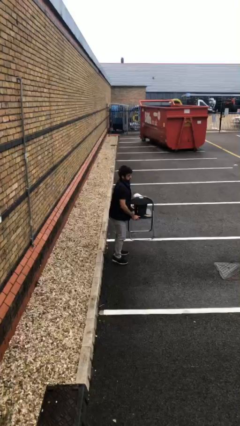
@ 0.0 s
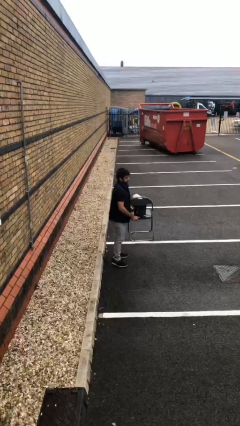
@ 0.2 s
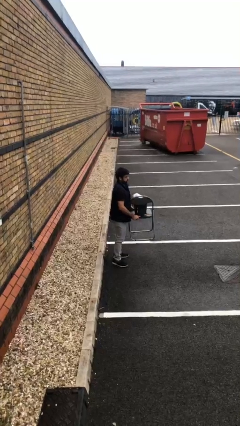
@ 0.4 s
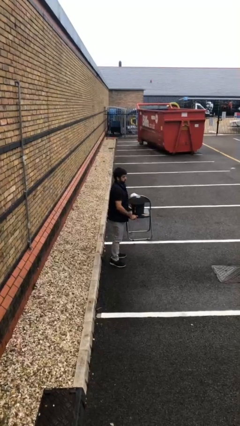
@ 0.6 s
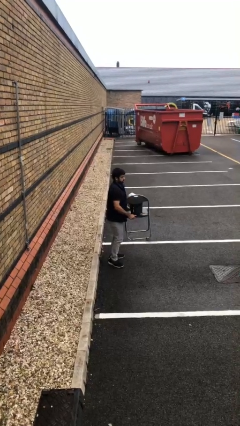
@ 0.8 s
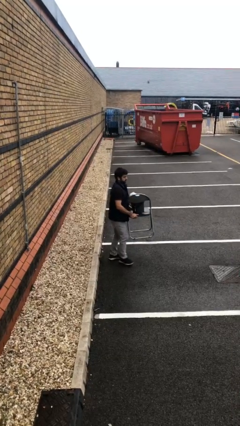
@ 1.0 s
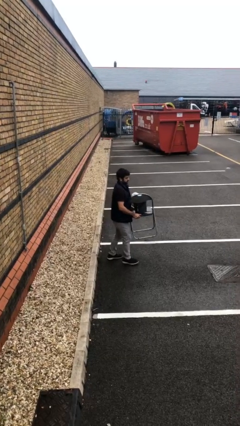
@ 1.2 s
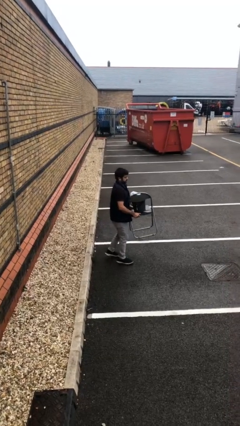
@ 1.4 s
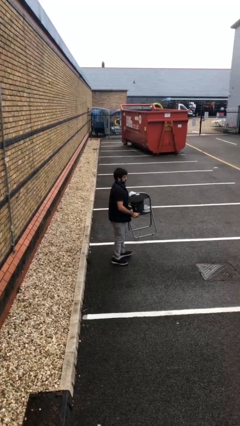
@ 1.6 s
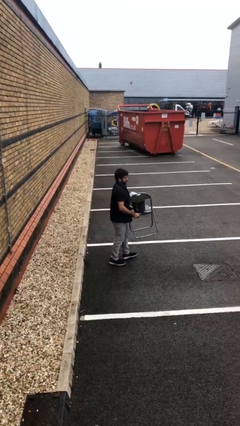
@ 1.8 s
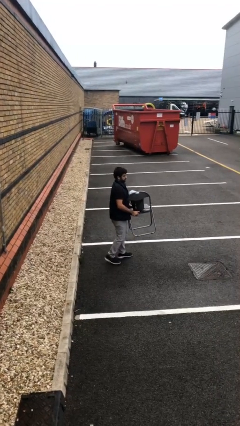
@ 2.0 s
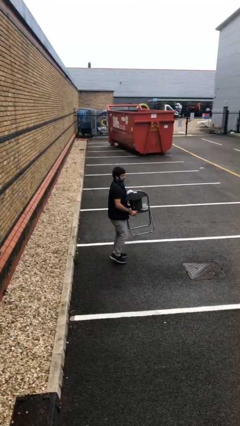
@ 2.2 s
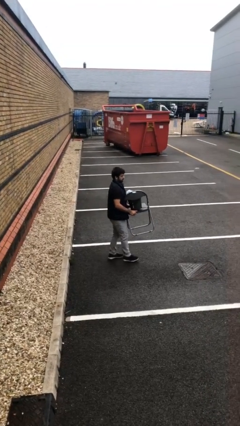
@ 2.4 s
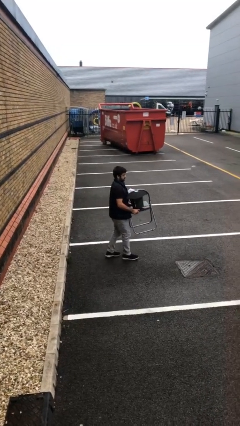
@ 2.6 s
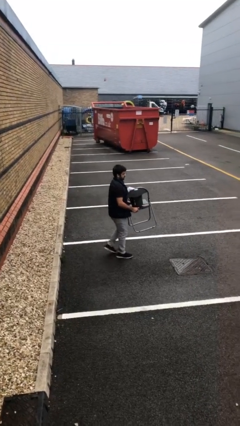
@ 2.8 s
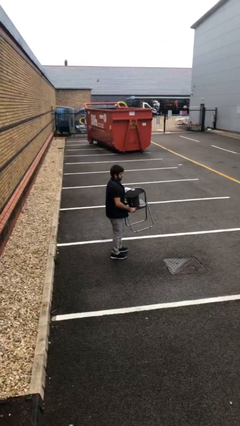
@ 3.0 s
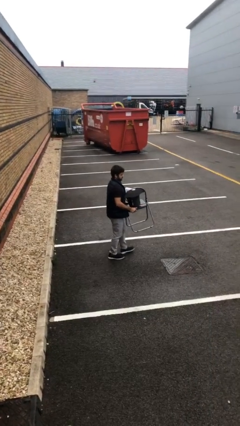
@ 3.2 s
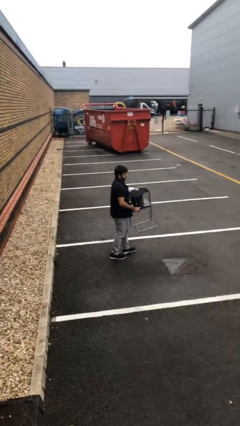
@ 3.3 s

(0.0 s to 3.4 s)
person carries heavy object

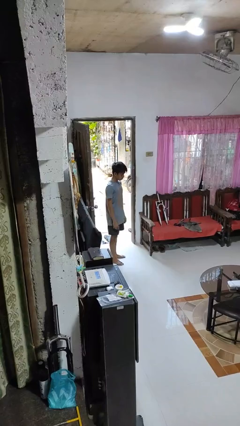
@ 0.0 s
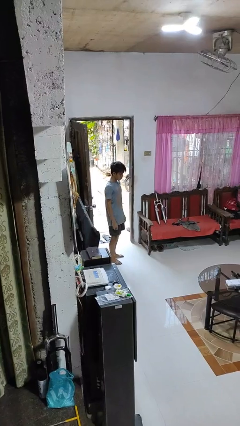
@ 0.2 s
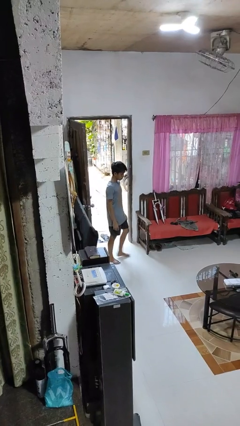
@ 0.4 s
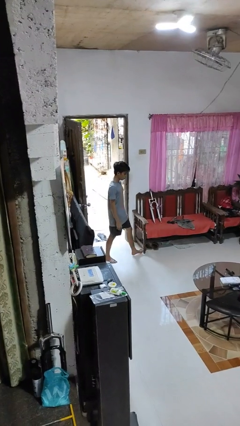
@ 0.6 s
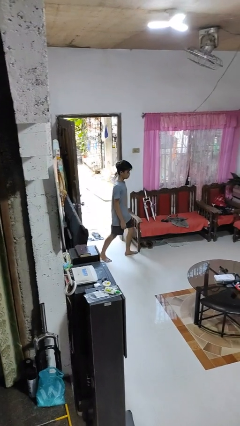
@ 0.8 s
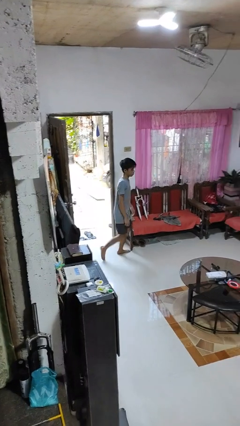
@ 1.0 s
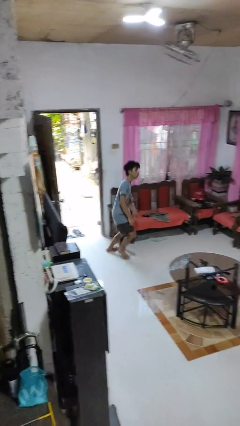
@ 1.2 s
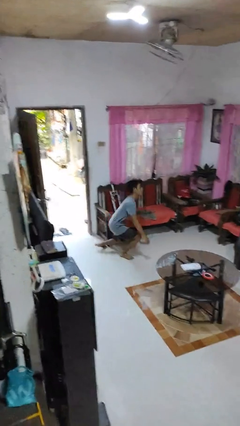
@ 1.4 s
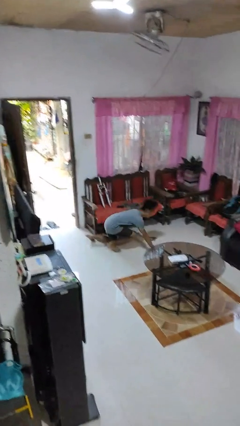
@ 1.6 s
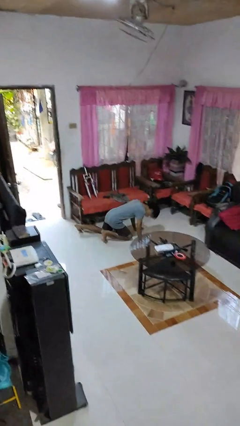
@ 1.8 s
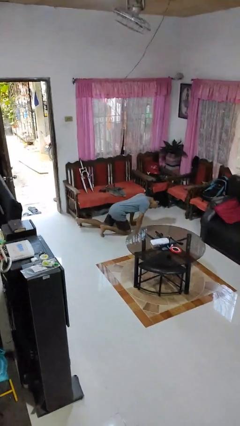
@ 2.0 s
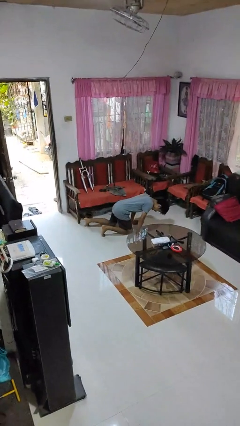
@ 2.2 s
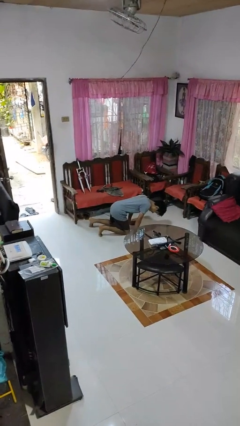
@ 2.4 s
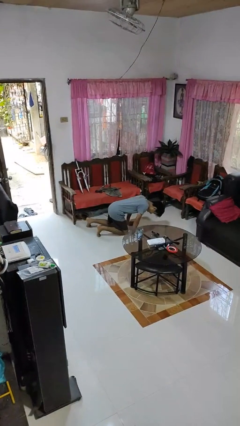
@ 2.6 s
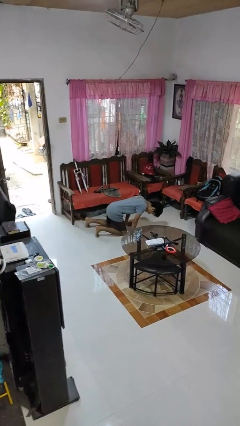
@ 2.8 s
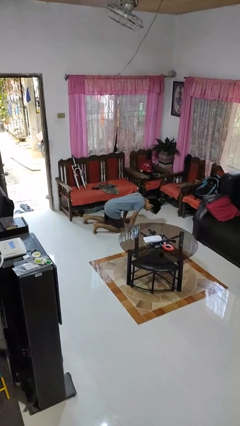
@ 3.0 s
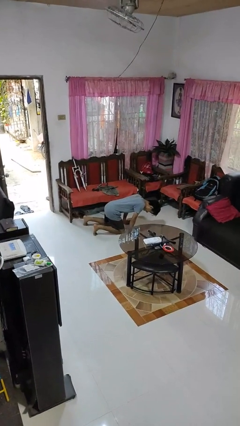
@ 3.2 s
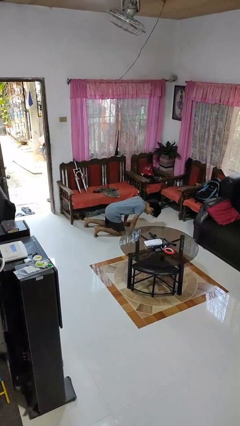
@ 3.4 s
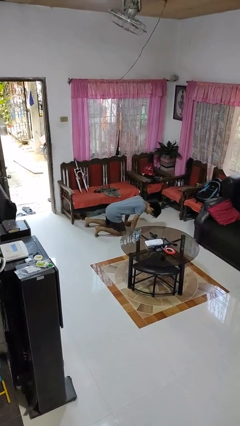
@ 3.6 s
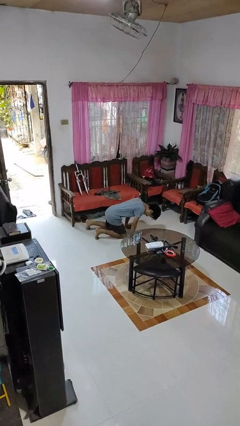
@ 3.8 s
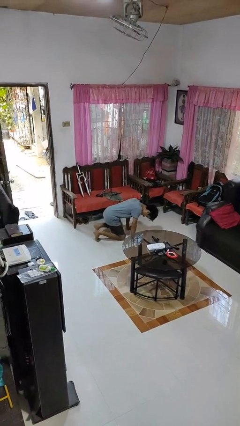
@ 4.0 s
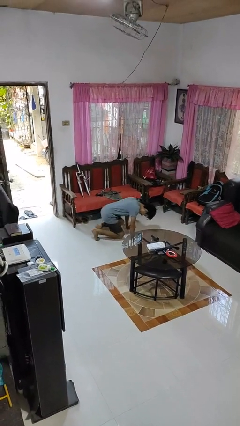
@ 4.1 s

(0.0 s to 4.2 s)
person trips on object on floor

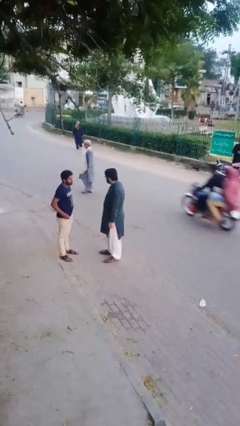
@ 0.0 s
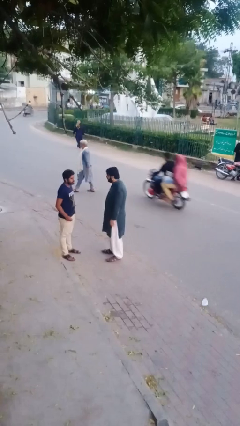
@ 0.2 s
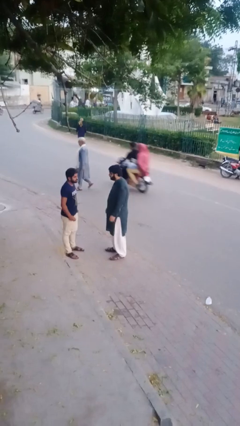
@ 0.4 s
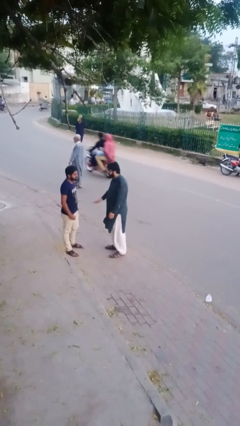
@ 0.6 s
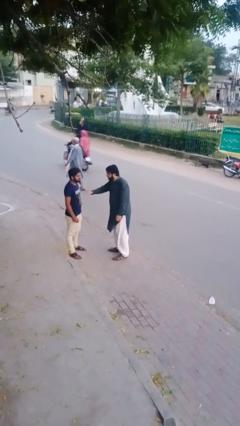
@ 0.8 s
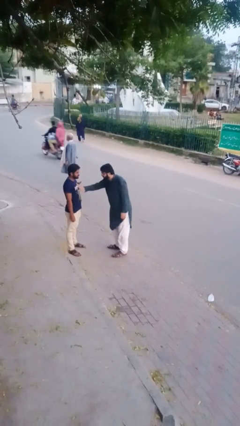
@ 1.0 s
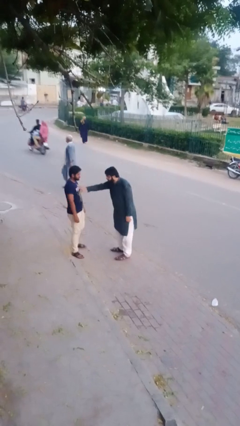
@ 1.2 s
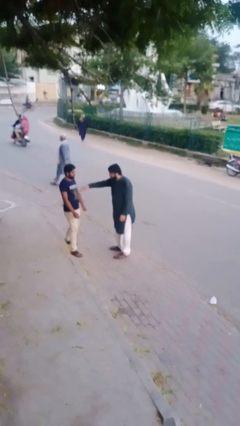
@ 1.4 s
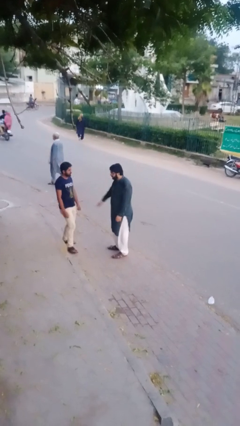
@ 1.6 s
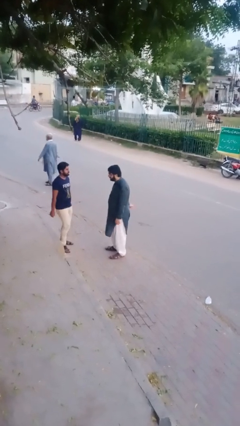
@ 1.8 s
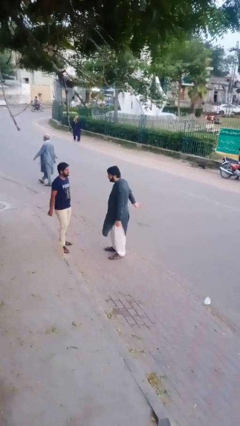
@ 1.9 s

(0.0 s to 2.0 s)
person shoves person

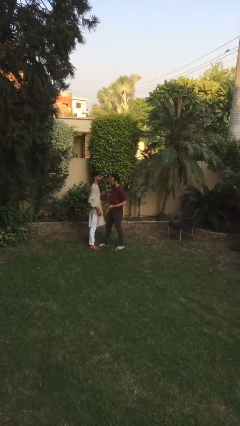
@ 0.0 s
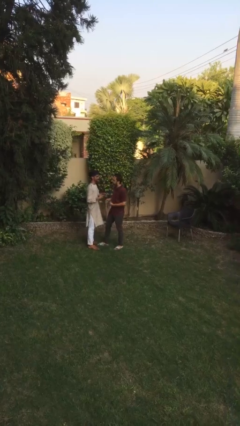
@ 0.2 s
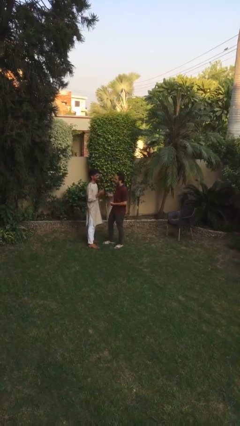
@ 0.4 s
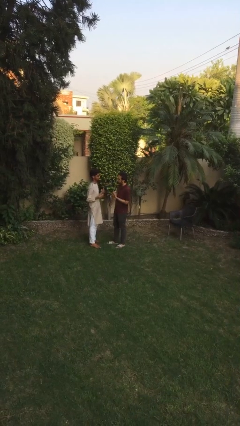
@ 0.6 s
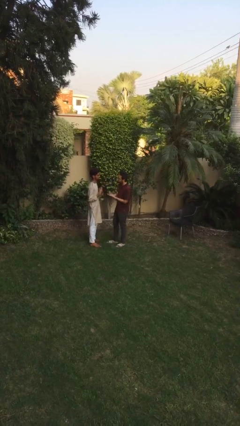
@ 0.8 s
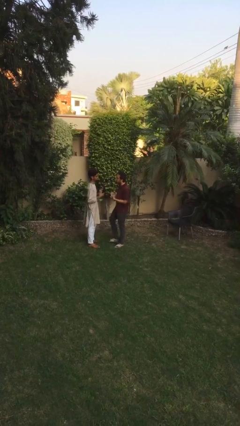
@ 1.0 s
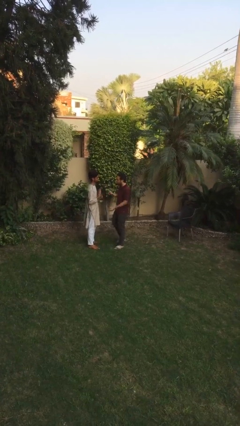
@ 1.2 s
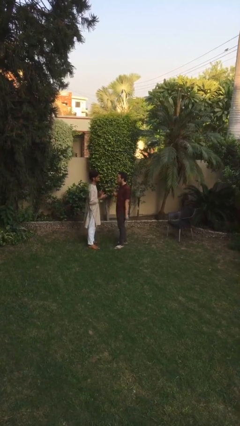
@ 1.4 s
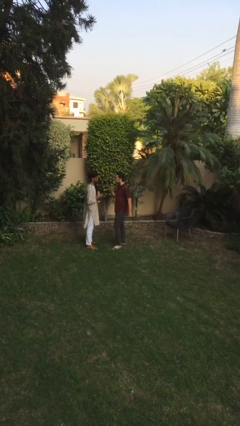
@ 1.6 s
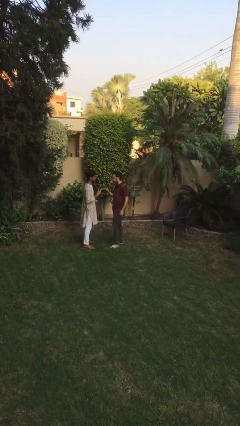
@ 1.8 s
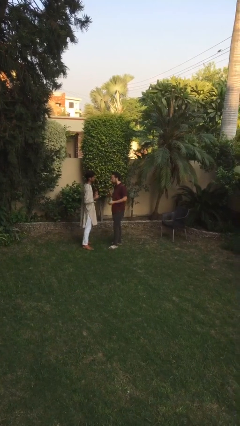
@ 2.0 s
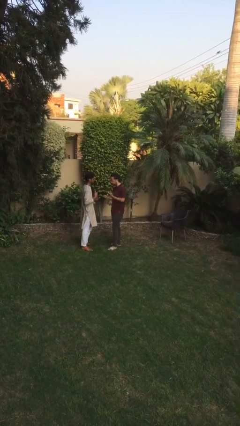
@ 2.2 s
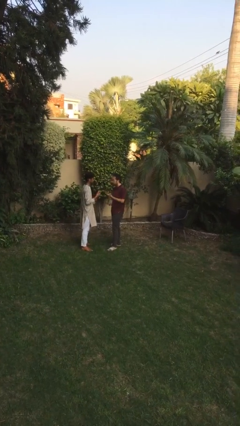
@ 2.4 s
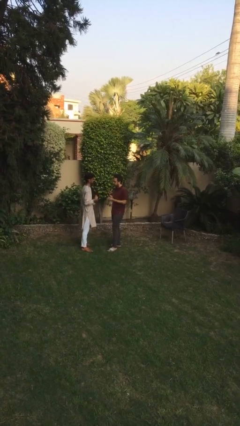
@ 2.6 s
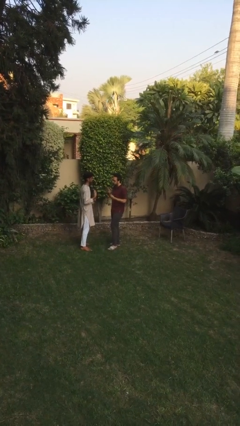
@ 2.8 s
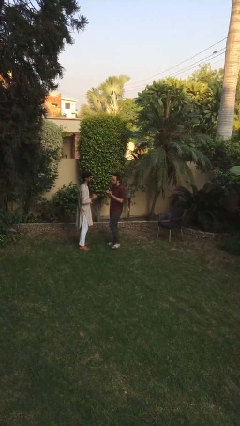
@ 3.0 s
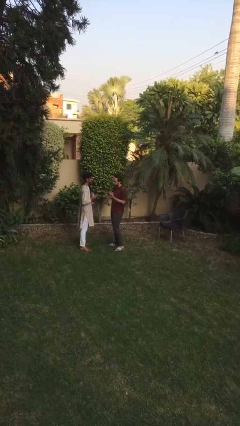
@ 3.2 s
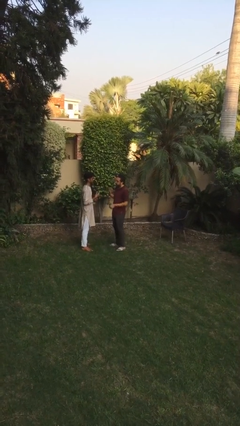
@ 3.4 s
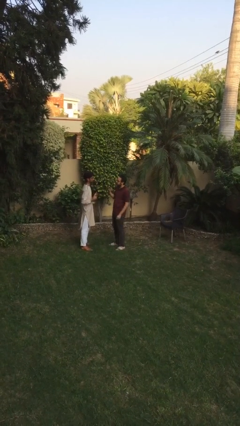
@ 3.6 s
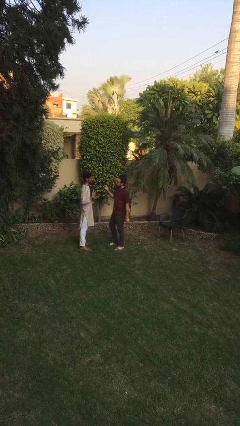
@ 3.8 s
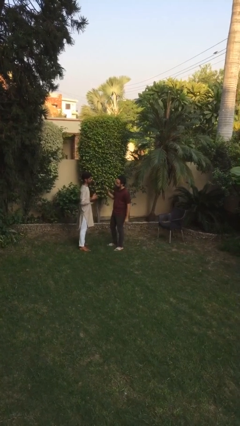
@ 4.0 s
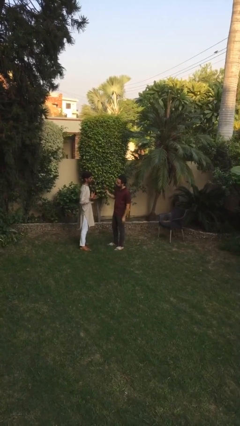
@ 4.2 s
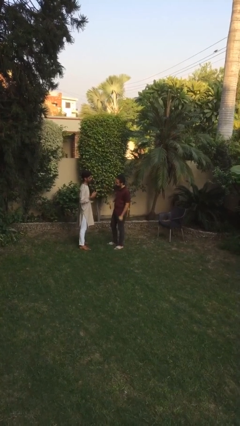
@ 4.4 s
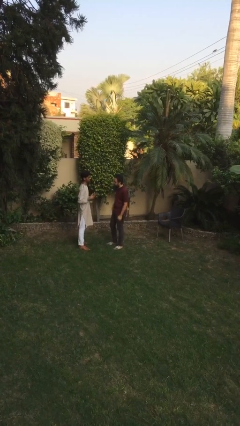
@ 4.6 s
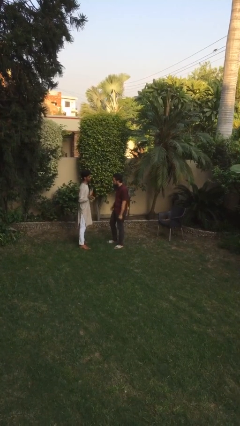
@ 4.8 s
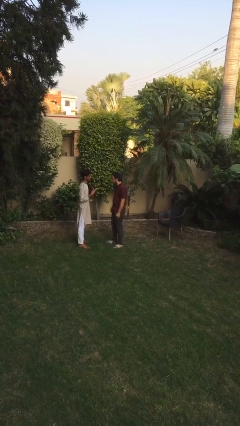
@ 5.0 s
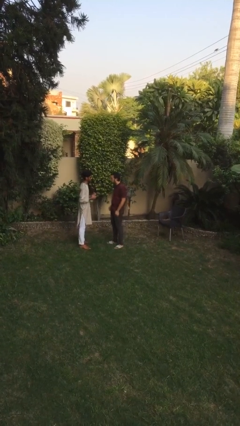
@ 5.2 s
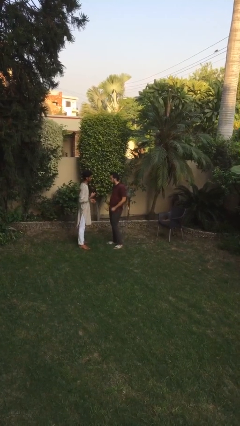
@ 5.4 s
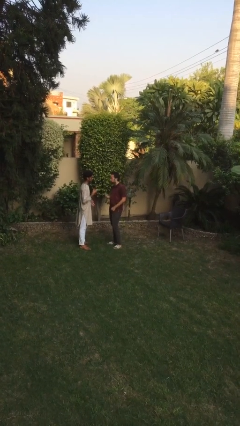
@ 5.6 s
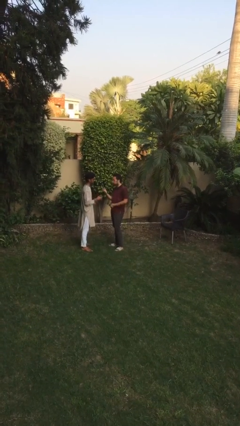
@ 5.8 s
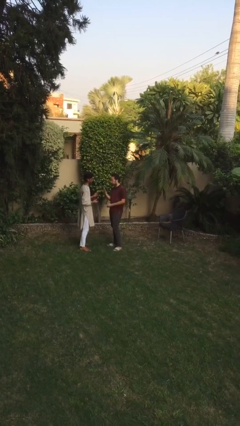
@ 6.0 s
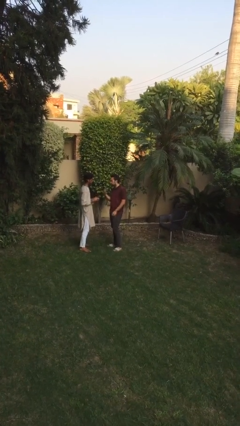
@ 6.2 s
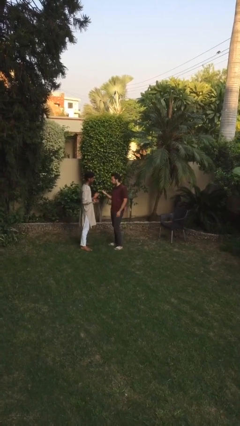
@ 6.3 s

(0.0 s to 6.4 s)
person talks to person

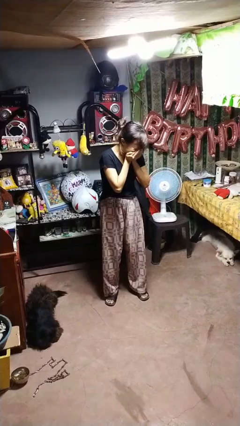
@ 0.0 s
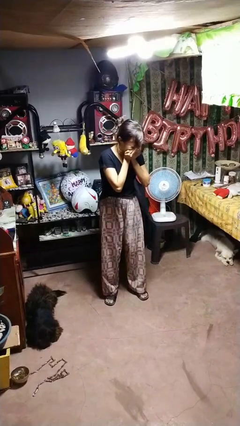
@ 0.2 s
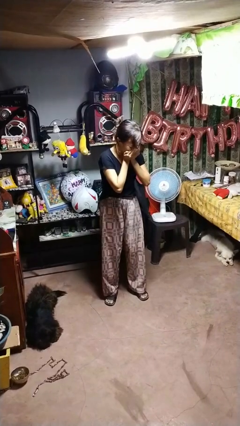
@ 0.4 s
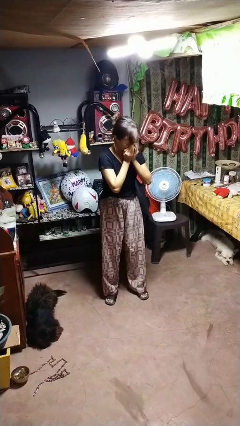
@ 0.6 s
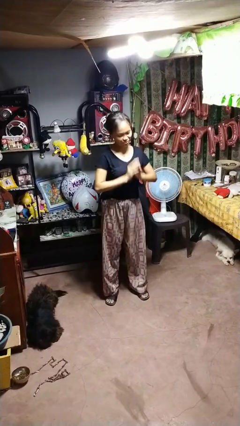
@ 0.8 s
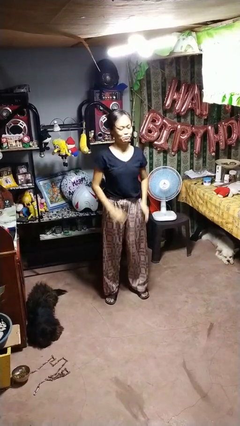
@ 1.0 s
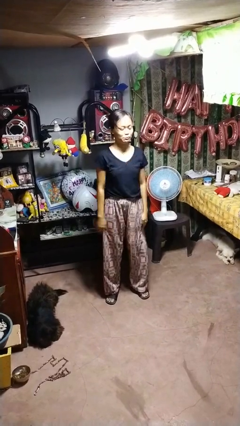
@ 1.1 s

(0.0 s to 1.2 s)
person sneezes into hand
